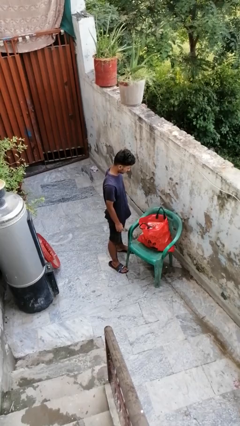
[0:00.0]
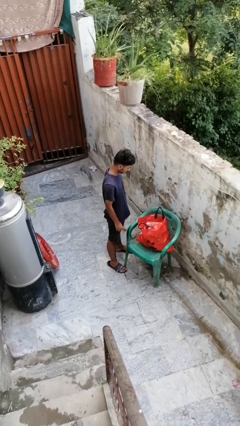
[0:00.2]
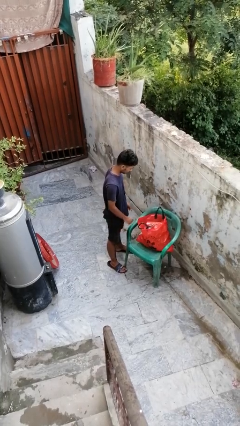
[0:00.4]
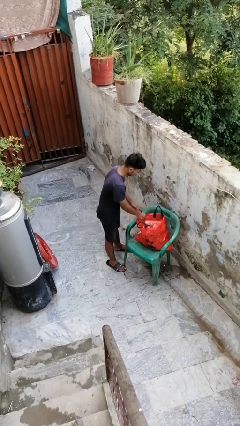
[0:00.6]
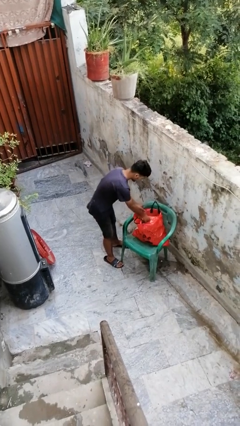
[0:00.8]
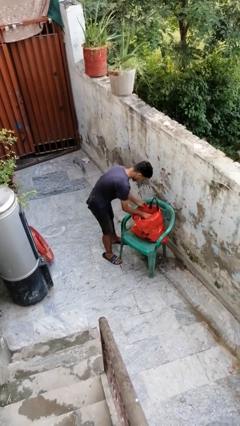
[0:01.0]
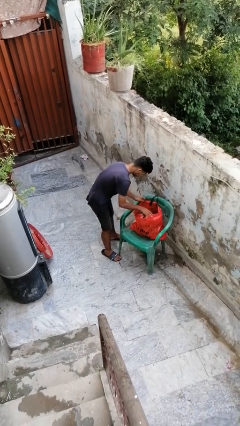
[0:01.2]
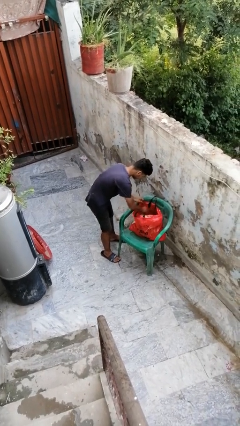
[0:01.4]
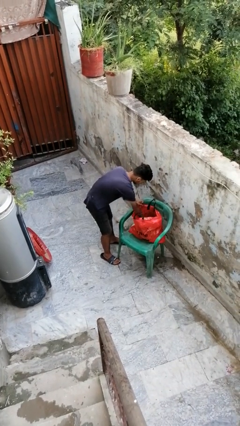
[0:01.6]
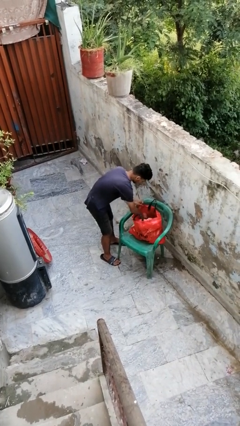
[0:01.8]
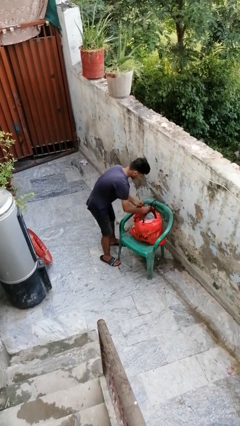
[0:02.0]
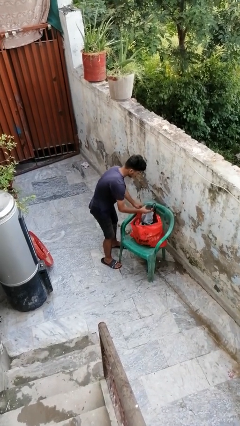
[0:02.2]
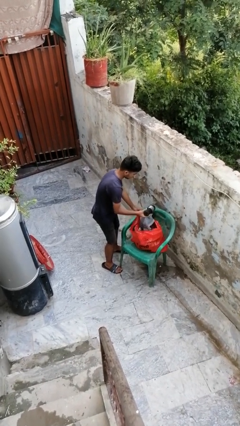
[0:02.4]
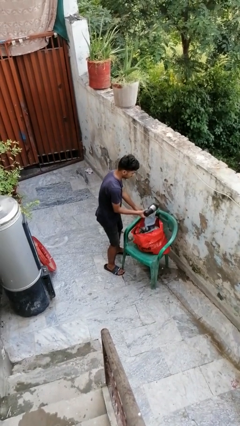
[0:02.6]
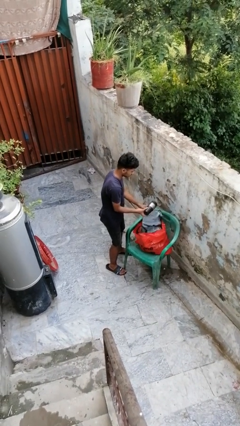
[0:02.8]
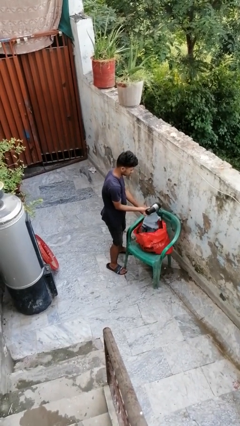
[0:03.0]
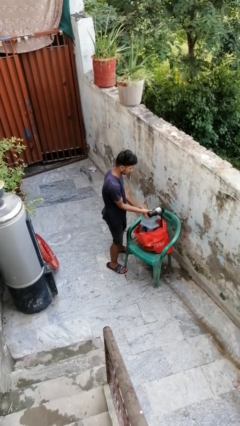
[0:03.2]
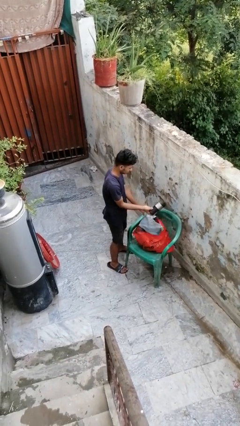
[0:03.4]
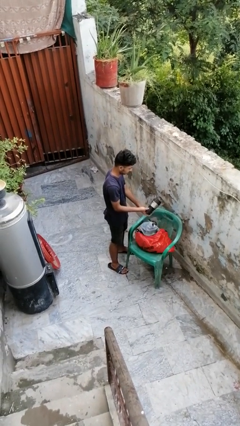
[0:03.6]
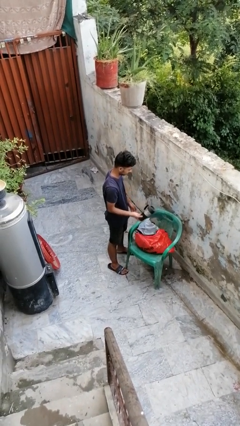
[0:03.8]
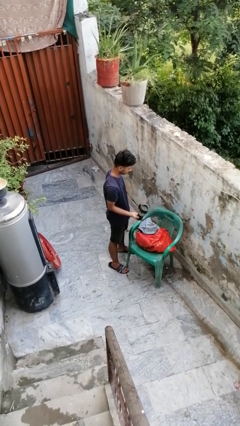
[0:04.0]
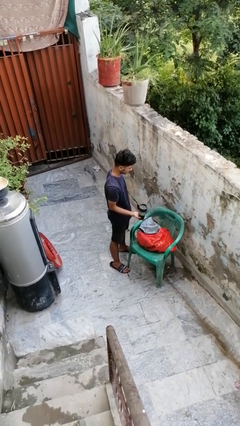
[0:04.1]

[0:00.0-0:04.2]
person takes object from bag

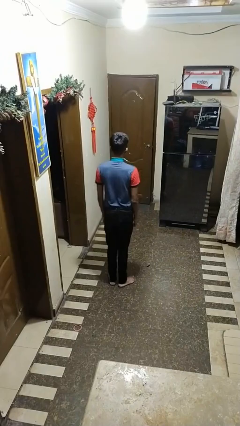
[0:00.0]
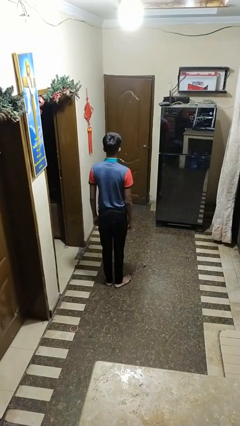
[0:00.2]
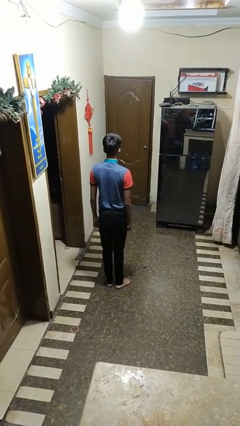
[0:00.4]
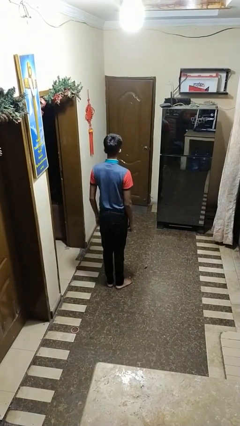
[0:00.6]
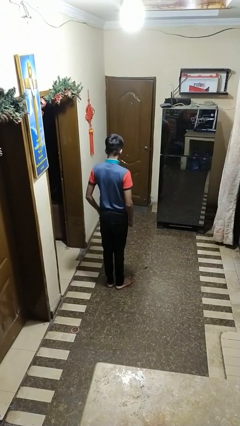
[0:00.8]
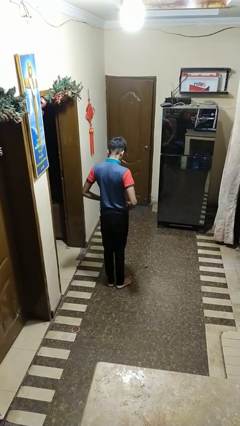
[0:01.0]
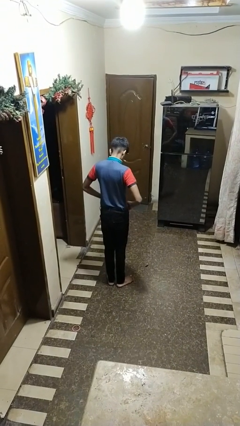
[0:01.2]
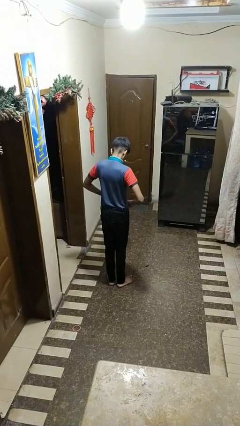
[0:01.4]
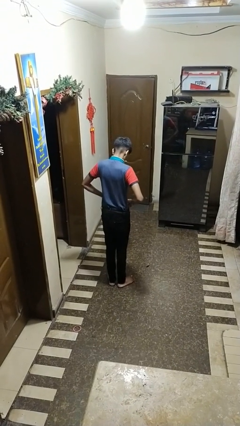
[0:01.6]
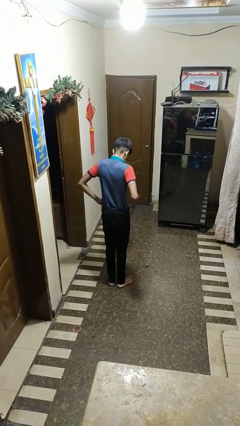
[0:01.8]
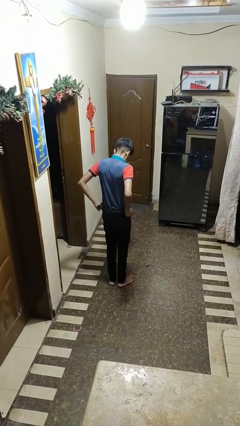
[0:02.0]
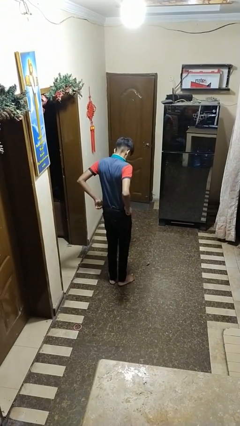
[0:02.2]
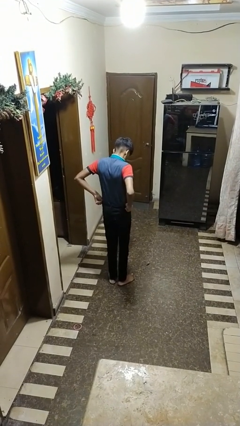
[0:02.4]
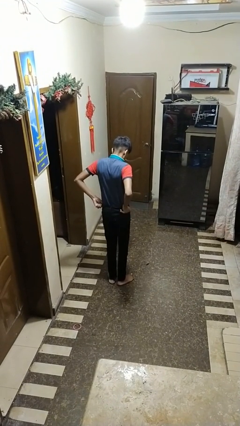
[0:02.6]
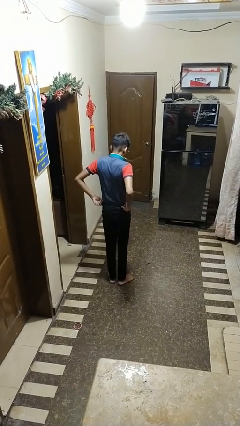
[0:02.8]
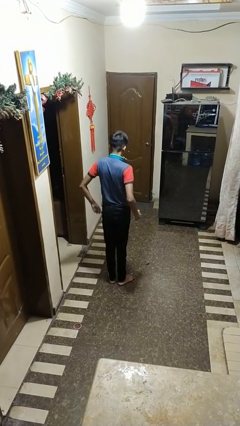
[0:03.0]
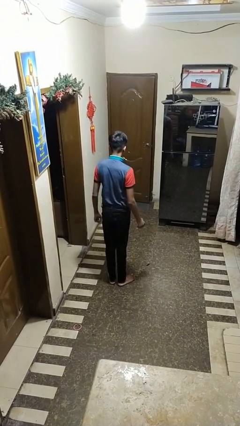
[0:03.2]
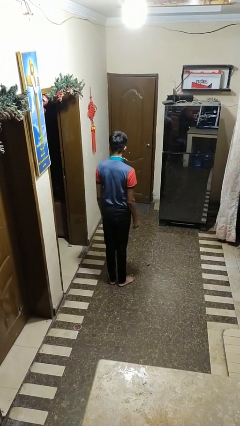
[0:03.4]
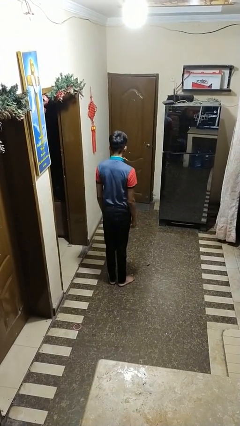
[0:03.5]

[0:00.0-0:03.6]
person hikes up pants

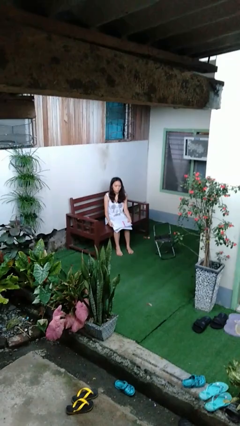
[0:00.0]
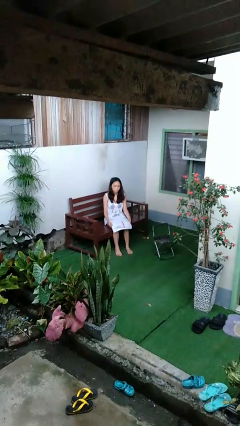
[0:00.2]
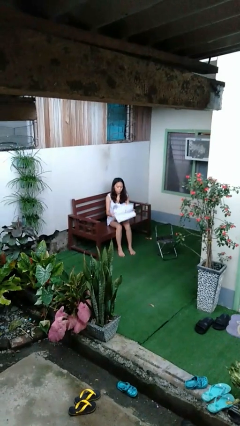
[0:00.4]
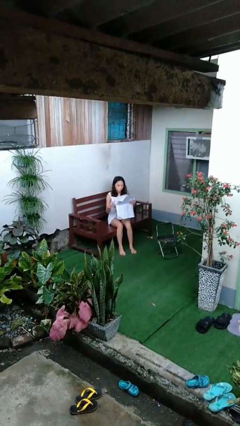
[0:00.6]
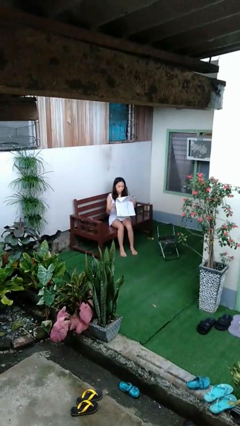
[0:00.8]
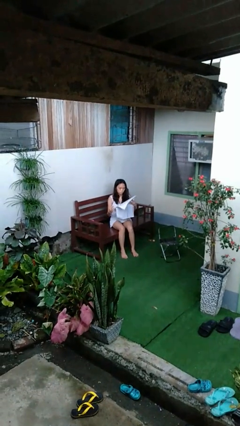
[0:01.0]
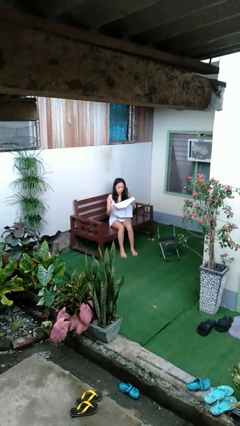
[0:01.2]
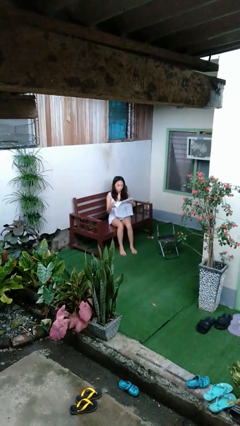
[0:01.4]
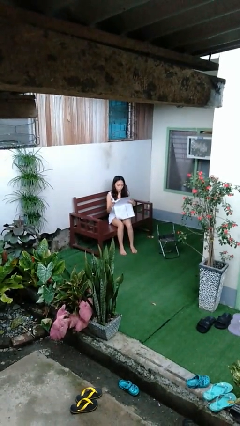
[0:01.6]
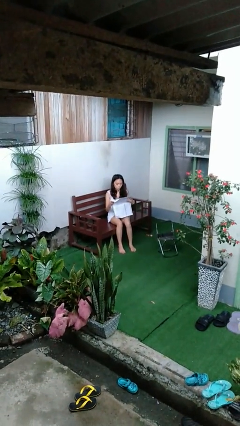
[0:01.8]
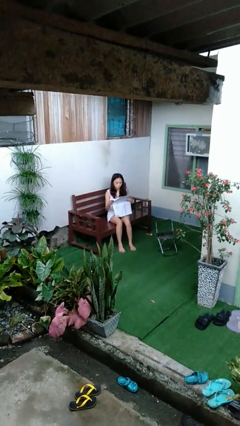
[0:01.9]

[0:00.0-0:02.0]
person reads newspaper

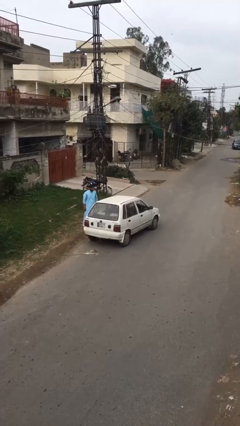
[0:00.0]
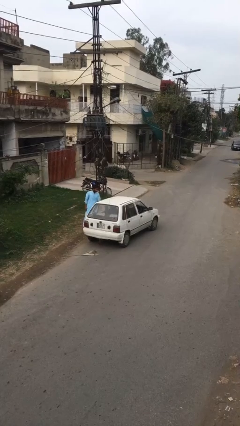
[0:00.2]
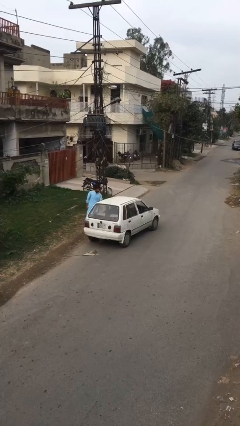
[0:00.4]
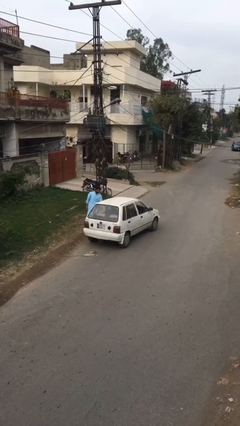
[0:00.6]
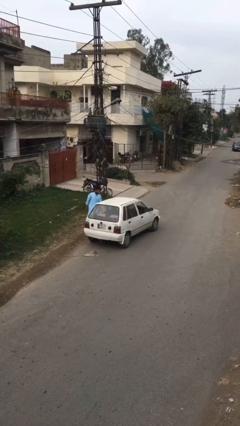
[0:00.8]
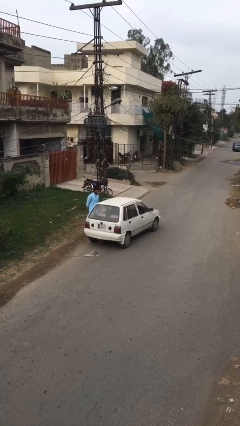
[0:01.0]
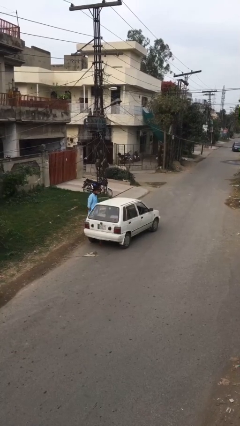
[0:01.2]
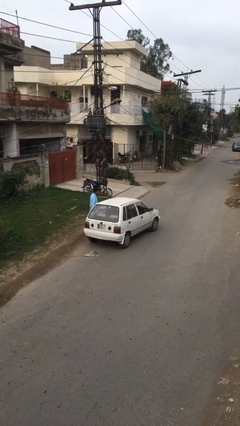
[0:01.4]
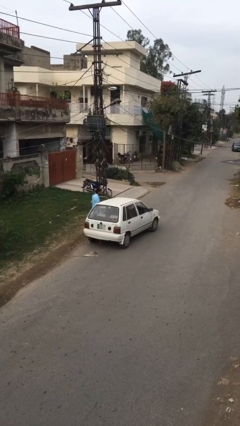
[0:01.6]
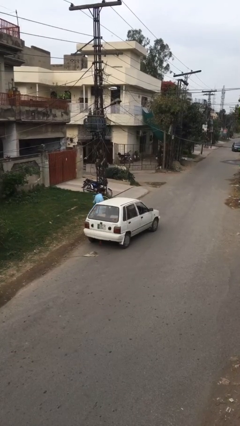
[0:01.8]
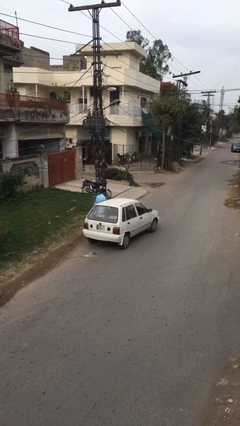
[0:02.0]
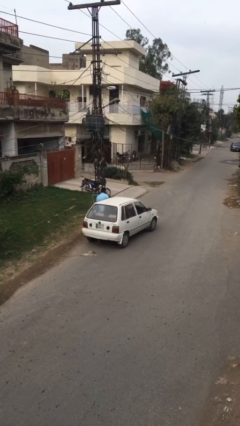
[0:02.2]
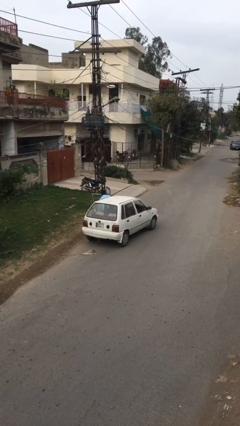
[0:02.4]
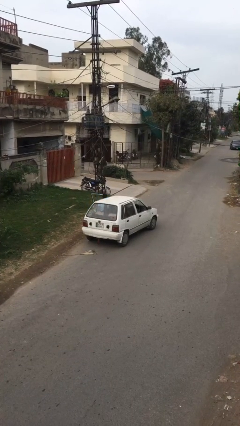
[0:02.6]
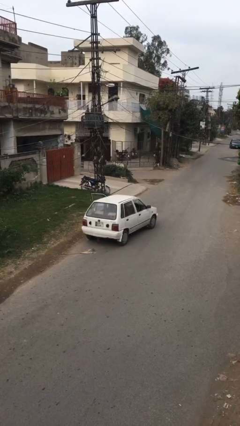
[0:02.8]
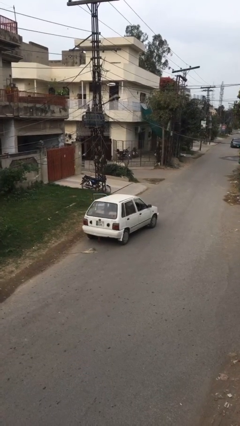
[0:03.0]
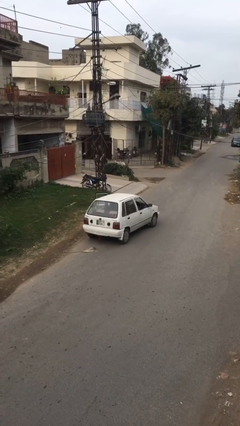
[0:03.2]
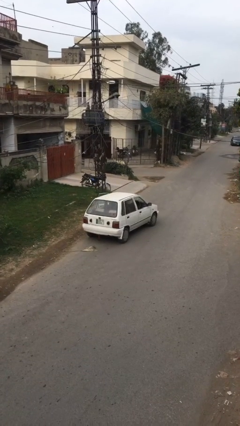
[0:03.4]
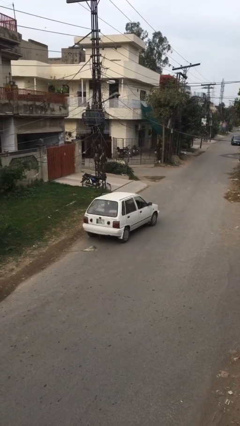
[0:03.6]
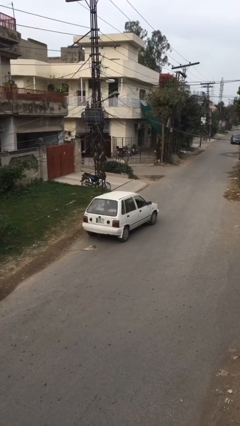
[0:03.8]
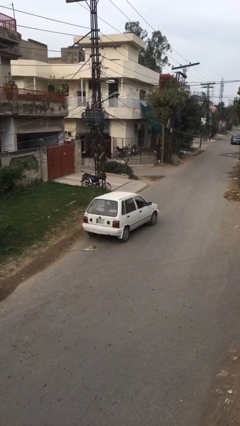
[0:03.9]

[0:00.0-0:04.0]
car picks up person

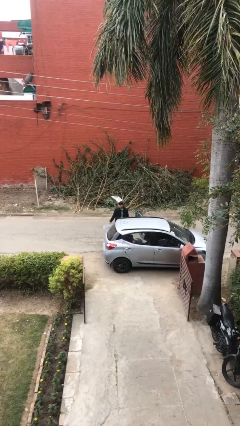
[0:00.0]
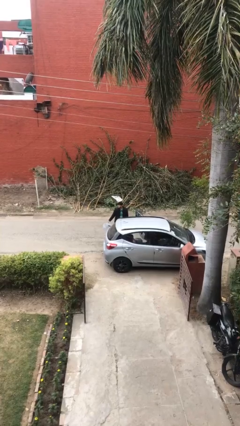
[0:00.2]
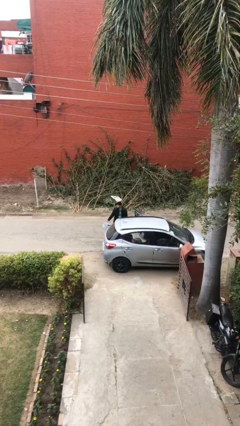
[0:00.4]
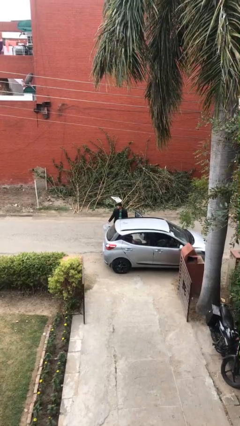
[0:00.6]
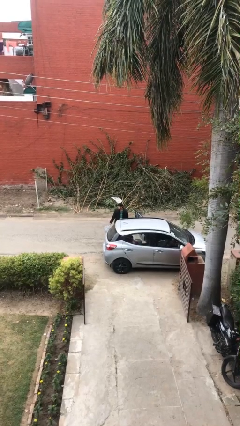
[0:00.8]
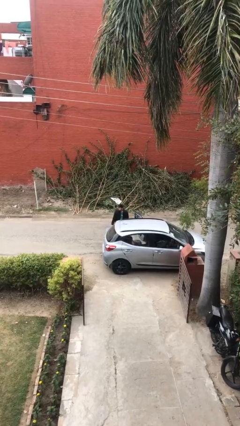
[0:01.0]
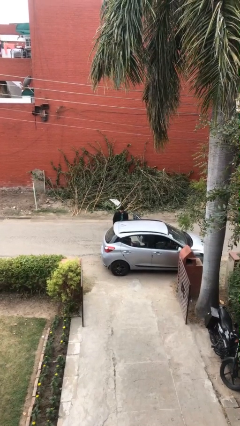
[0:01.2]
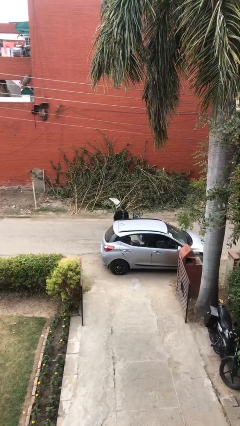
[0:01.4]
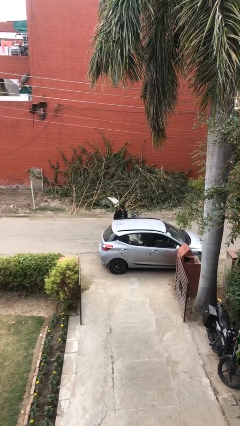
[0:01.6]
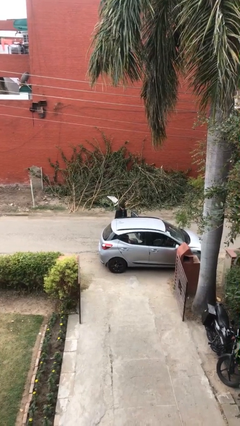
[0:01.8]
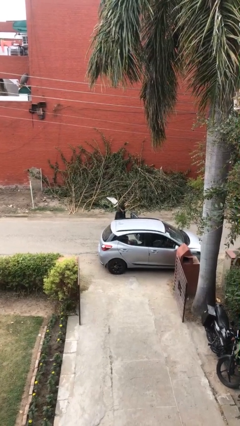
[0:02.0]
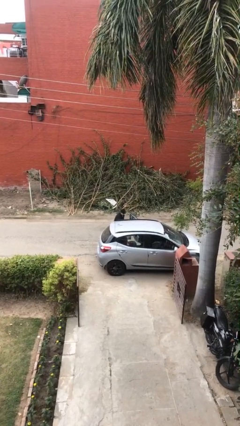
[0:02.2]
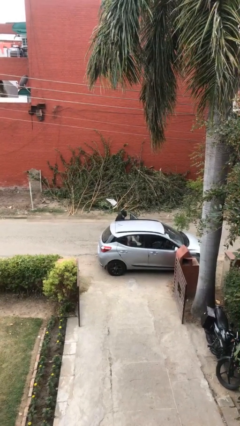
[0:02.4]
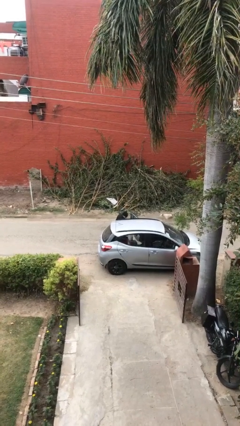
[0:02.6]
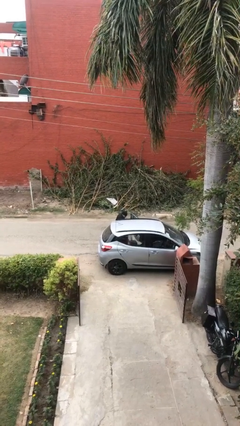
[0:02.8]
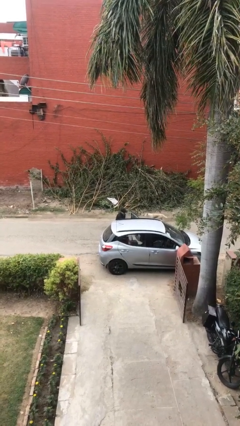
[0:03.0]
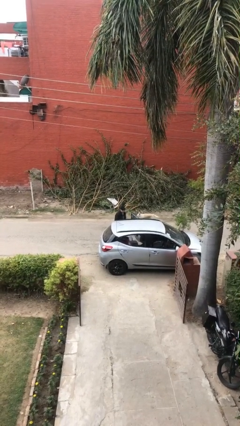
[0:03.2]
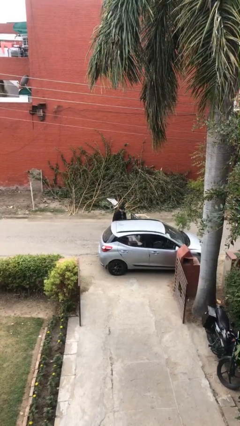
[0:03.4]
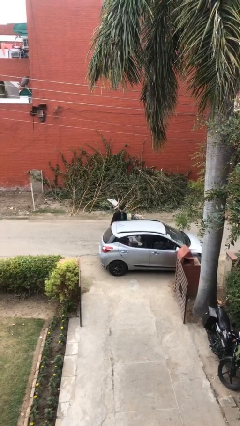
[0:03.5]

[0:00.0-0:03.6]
person loads car
